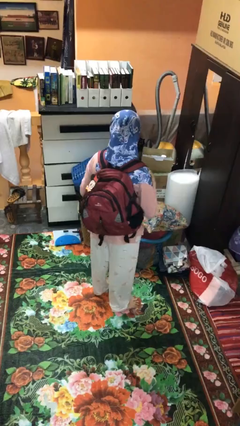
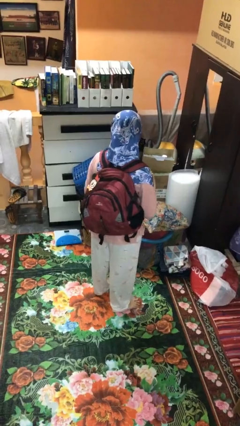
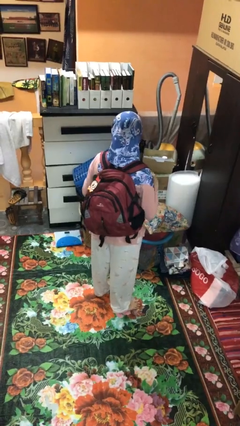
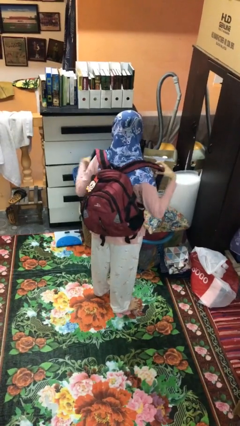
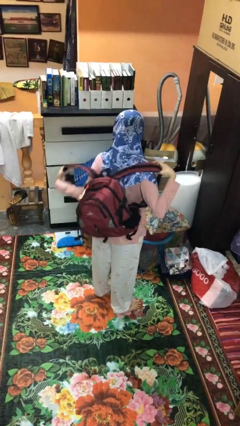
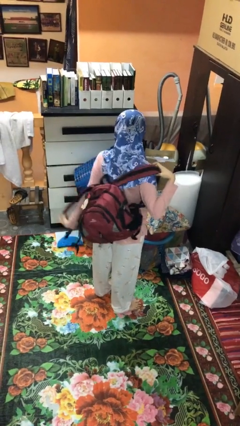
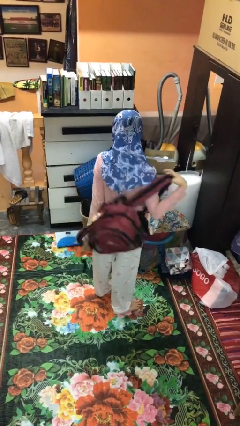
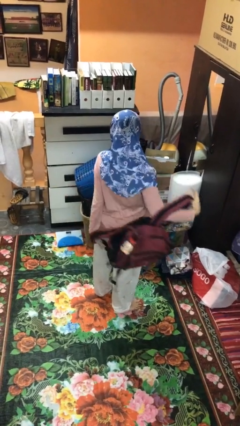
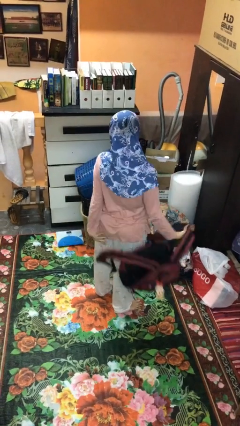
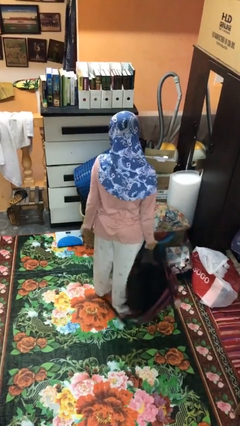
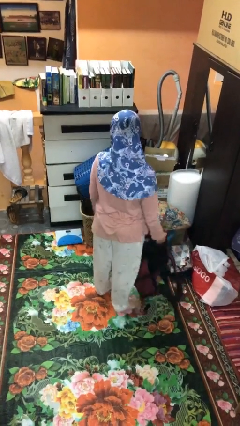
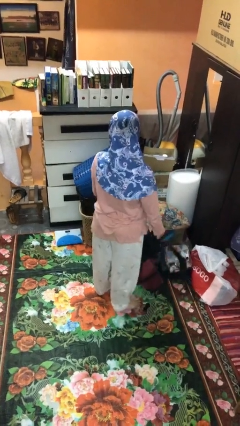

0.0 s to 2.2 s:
person takes off backpack

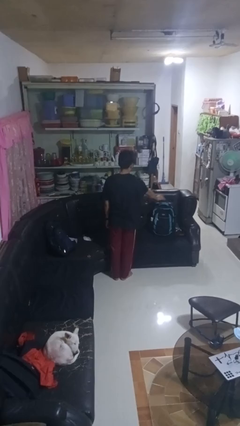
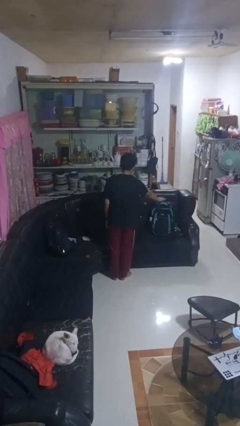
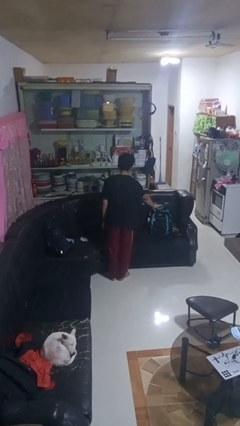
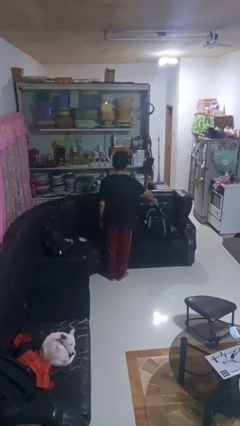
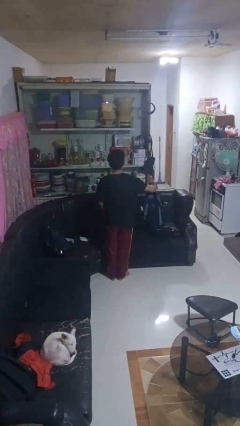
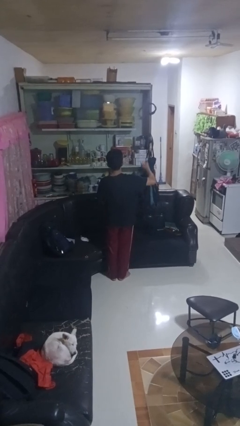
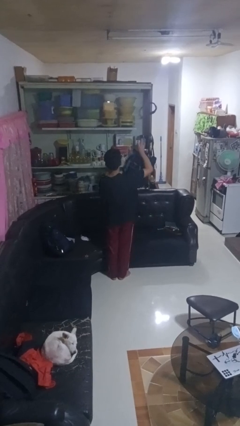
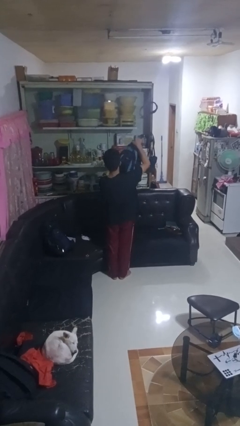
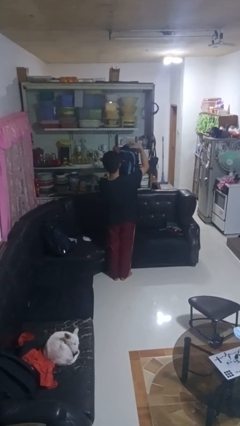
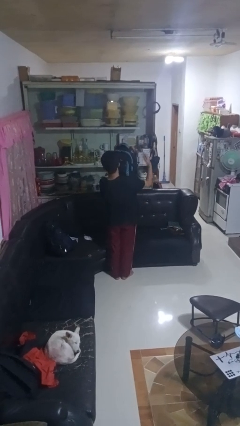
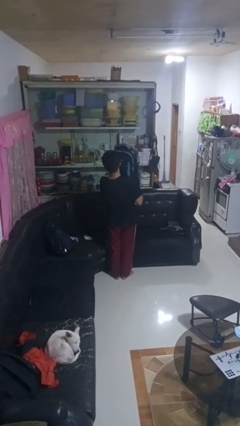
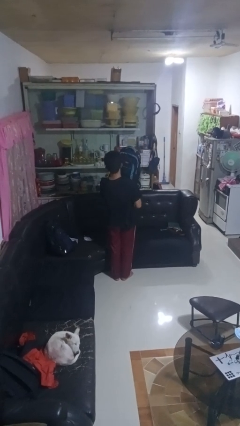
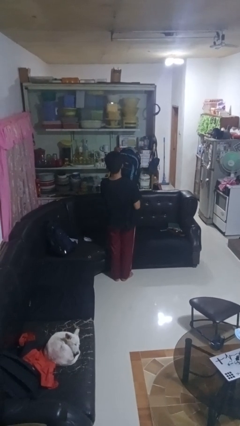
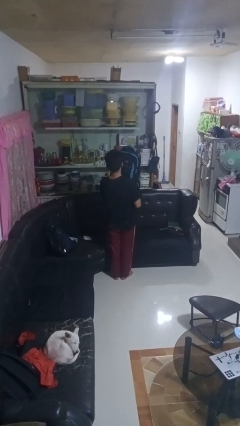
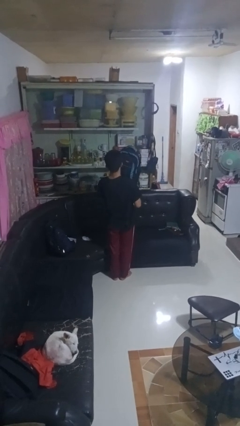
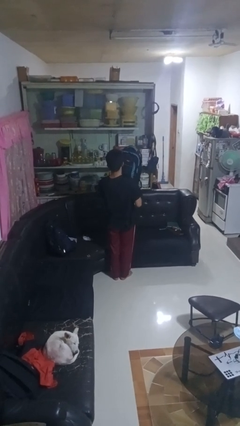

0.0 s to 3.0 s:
person picks up object from couch

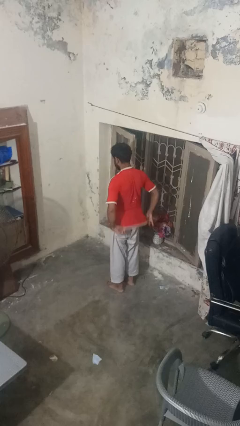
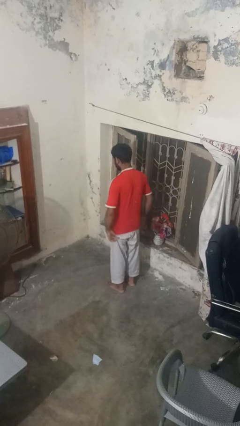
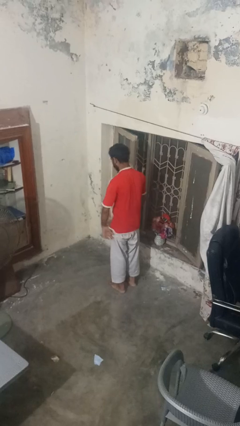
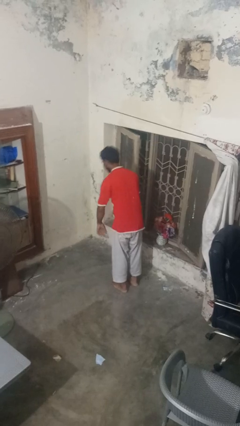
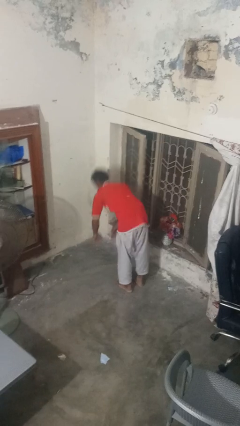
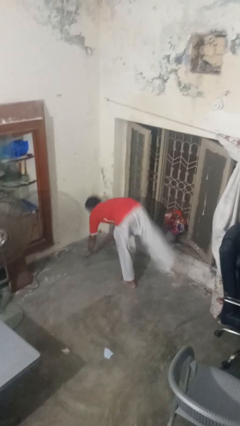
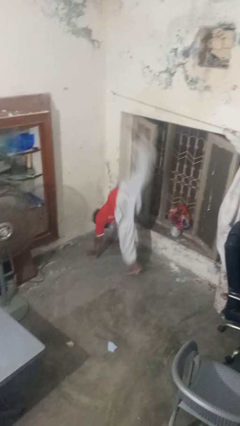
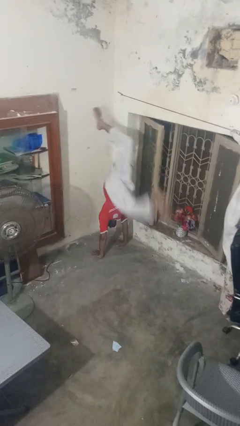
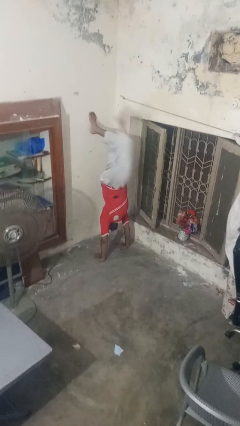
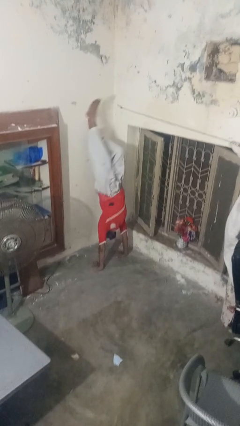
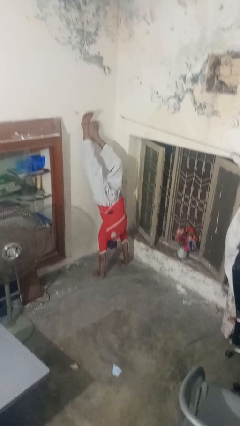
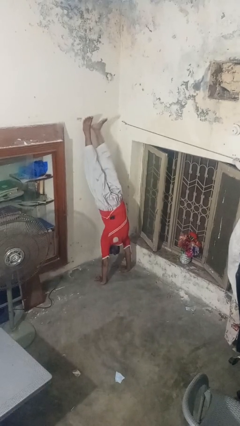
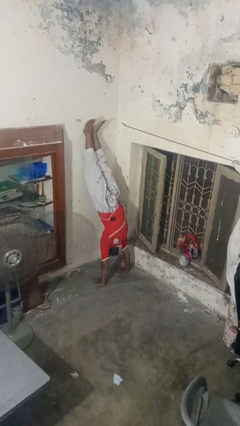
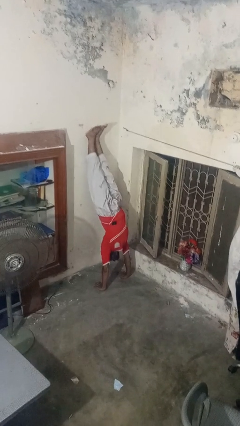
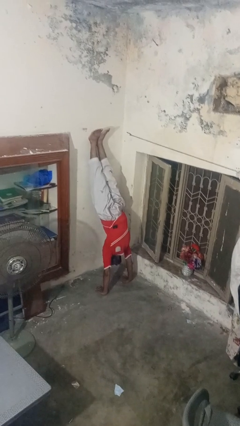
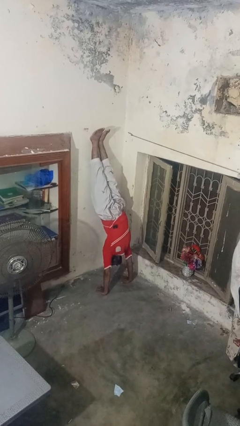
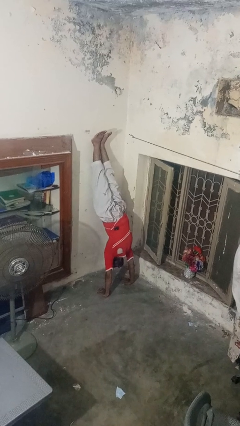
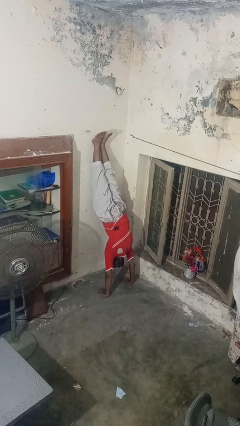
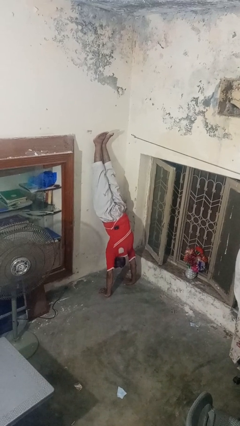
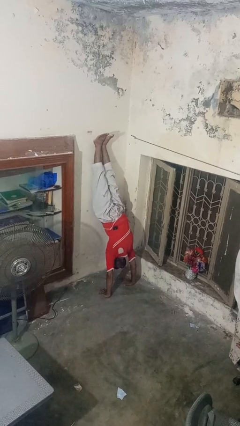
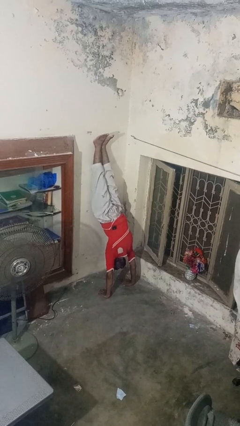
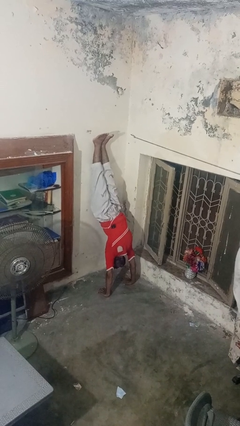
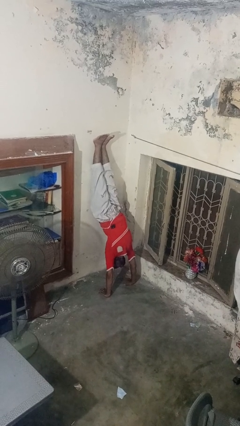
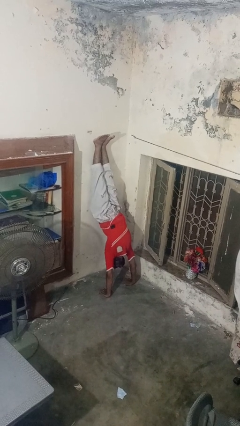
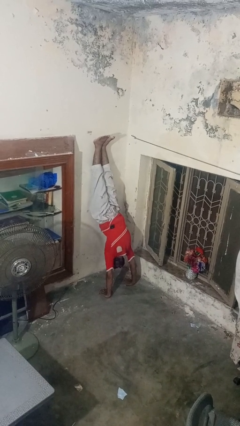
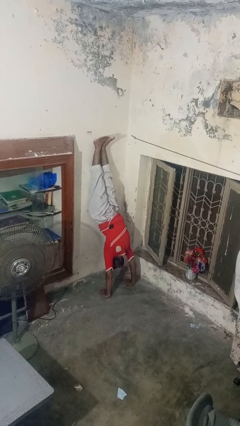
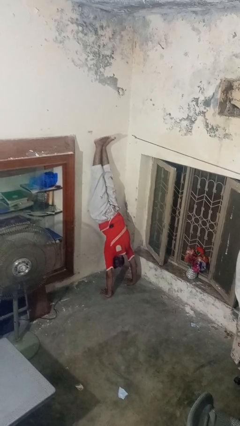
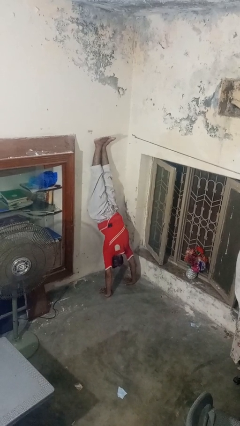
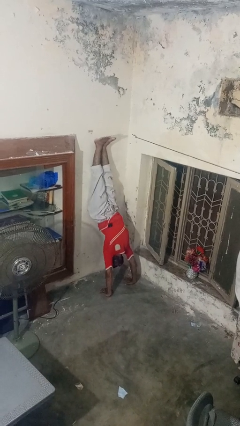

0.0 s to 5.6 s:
person handstand

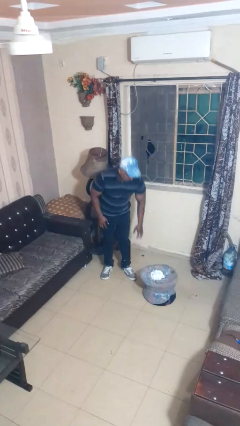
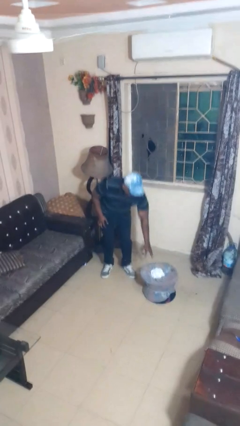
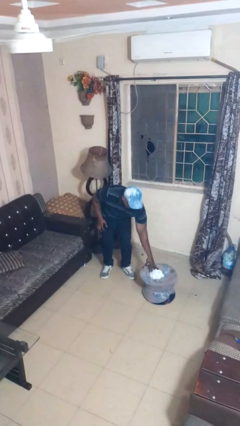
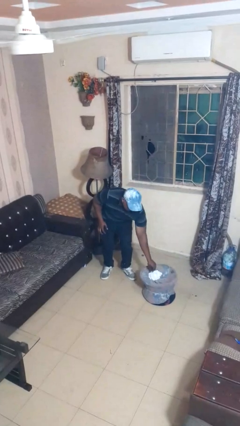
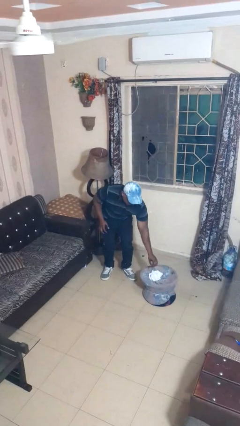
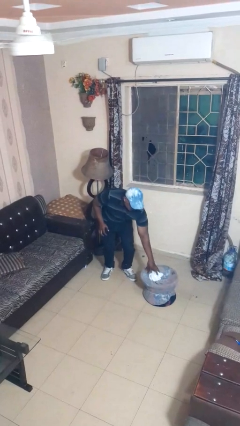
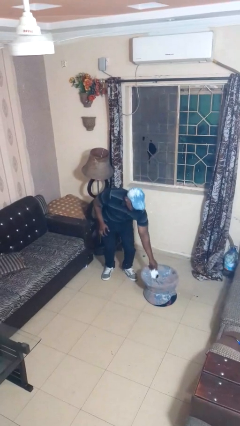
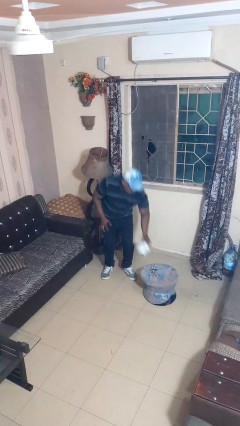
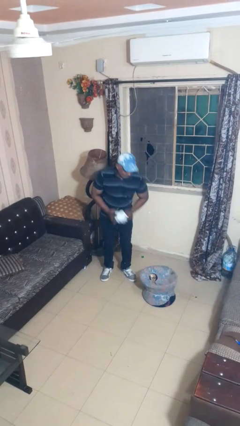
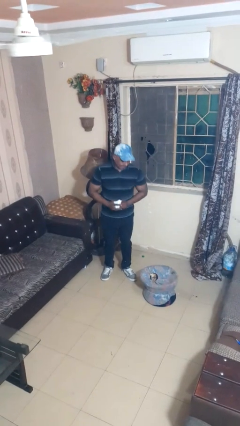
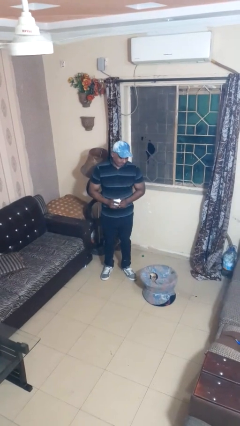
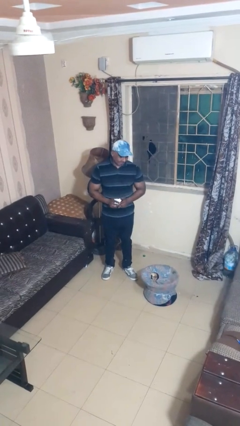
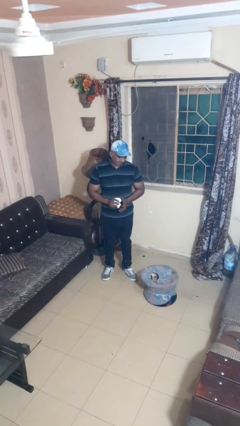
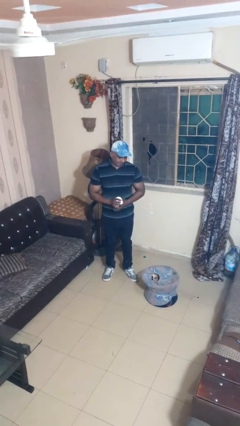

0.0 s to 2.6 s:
person takes object from basket

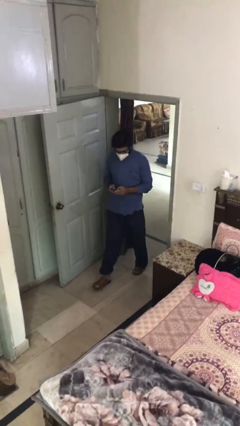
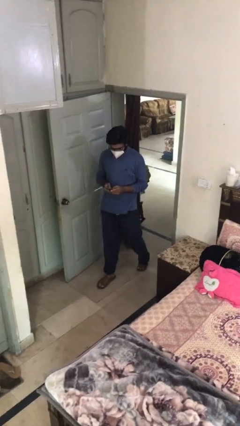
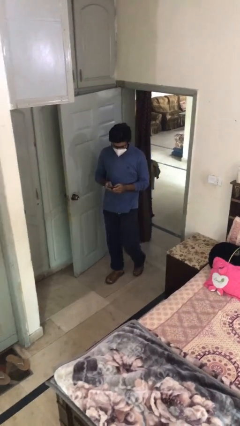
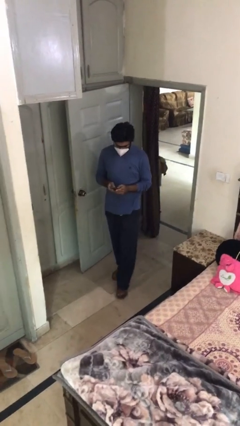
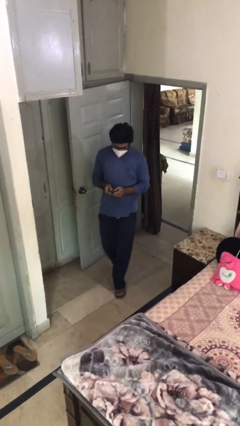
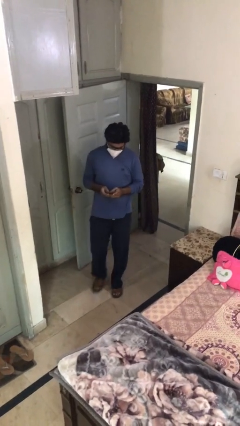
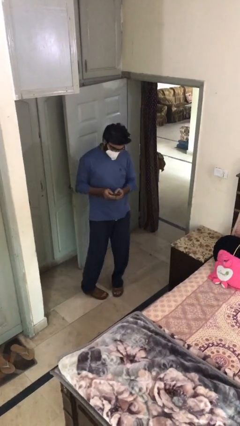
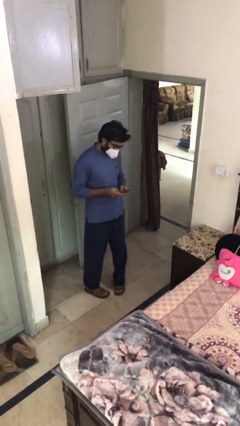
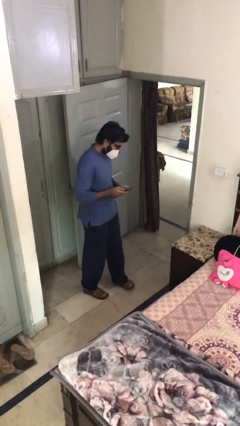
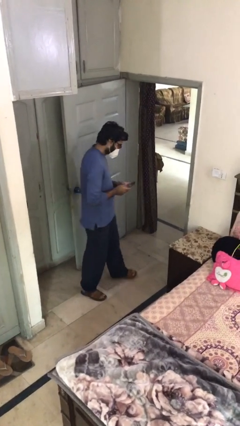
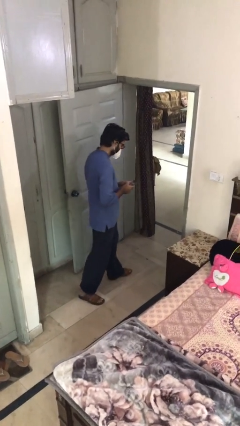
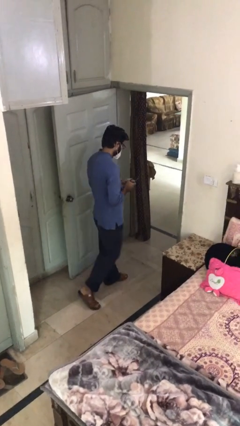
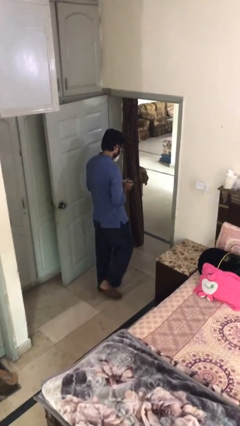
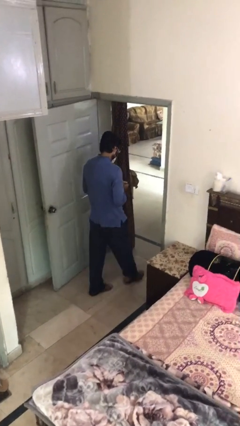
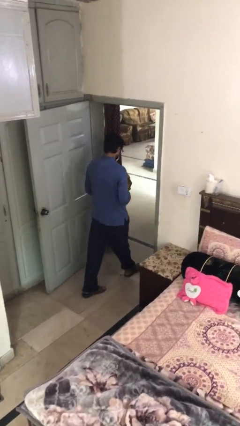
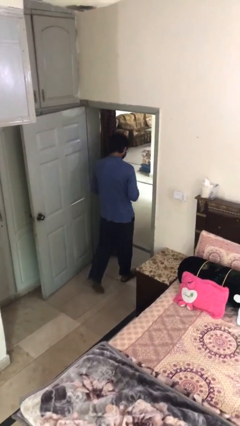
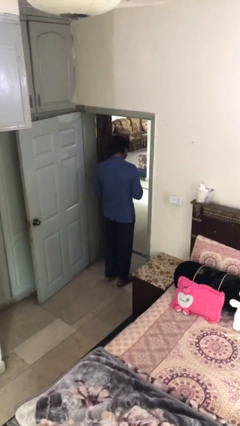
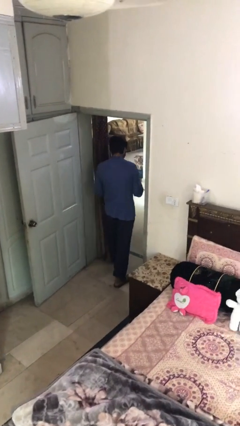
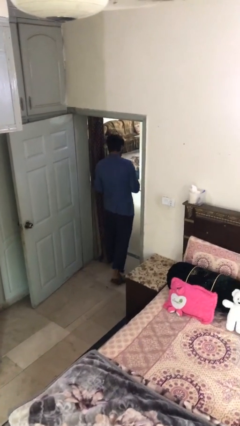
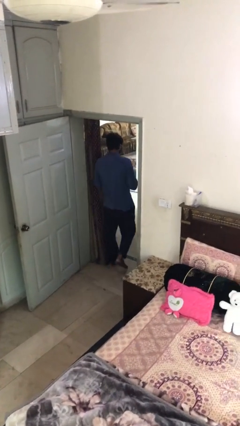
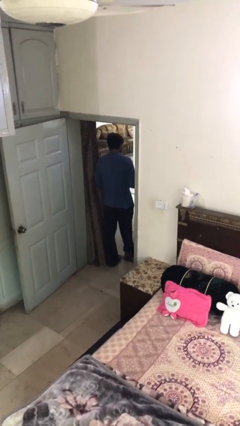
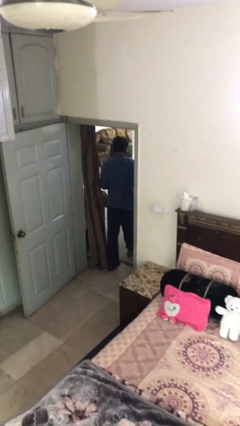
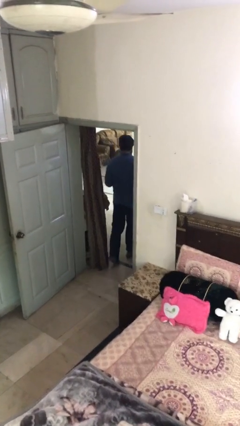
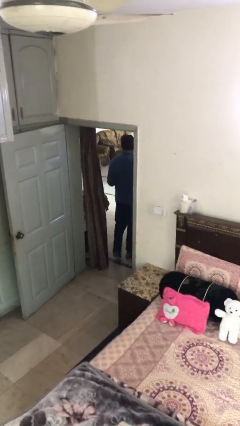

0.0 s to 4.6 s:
person exits scene through structure
